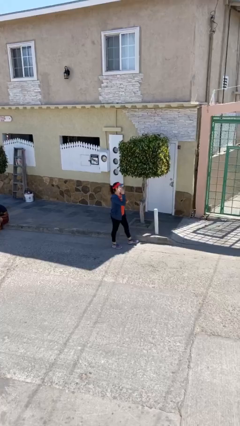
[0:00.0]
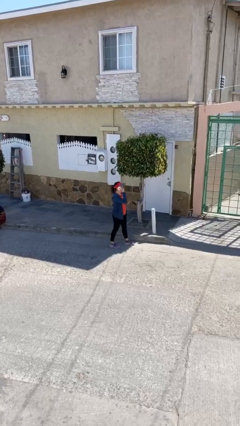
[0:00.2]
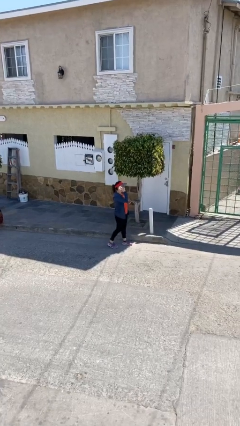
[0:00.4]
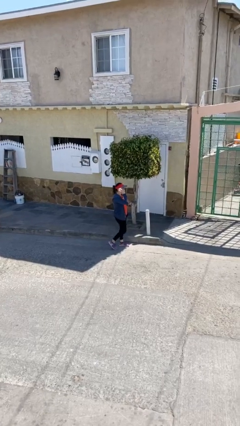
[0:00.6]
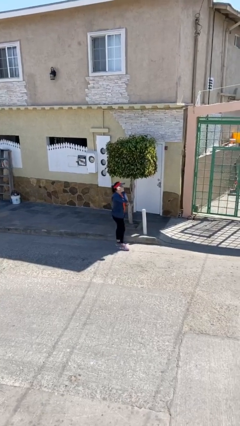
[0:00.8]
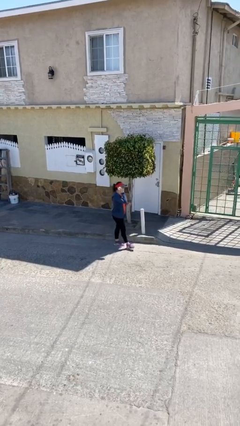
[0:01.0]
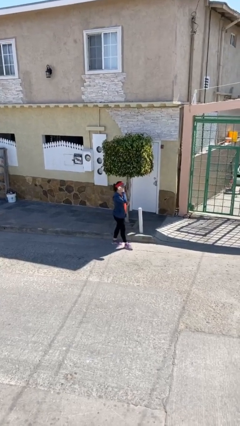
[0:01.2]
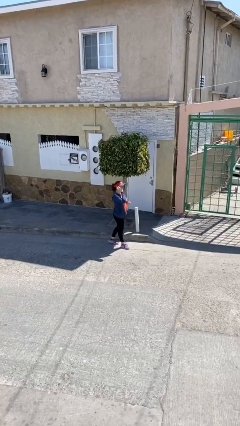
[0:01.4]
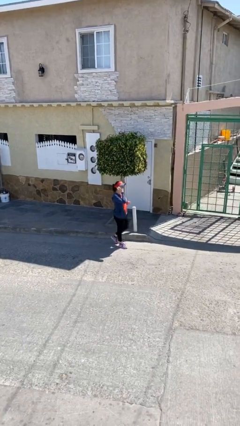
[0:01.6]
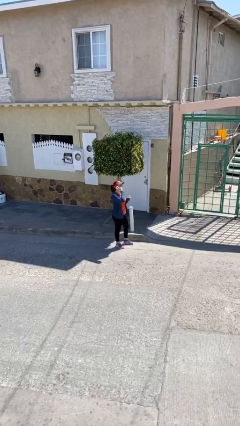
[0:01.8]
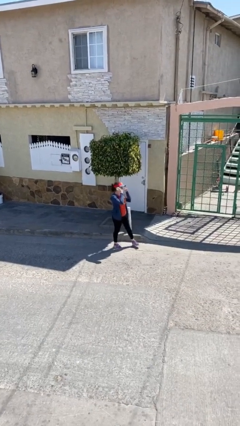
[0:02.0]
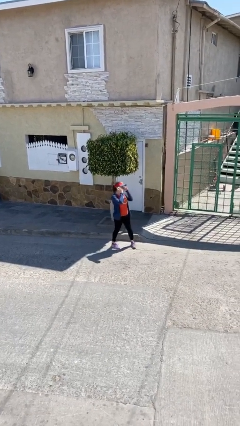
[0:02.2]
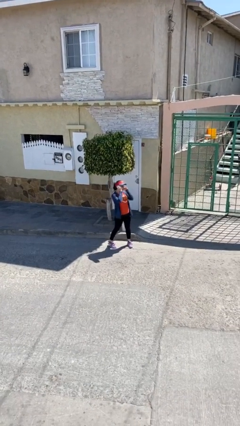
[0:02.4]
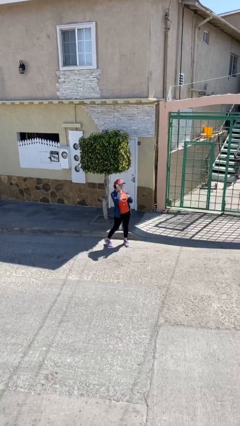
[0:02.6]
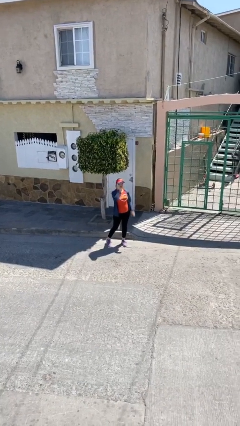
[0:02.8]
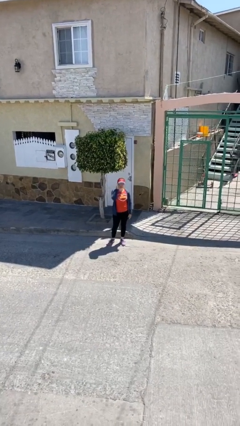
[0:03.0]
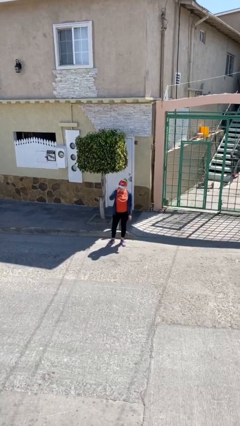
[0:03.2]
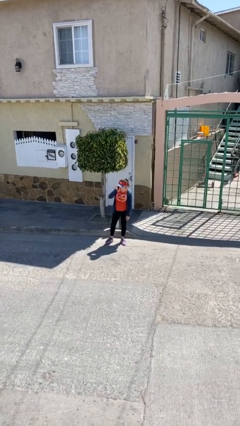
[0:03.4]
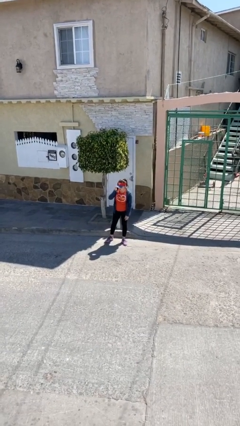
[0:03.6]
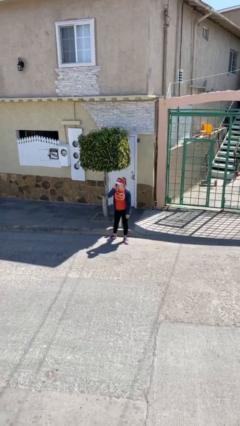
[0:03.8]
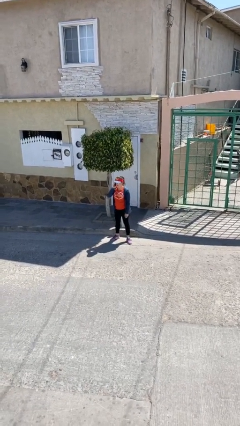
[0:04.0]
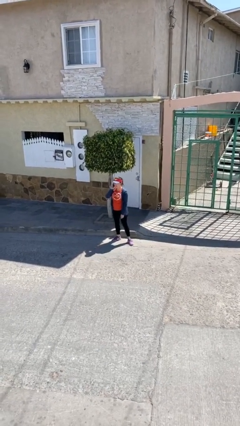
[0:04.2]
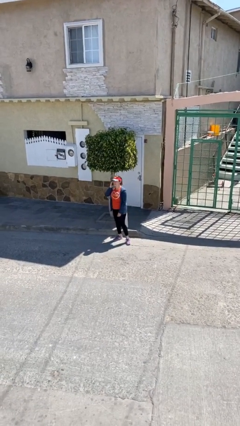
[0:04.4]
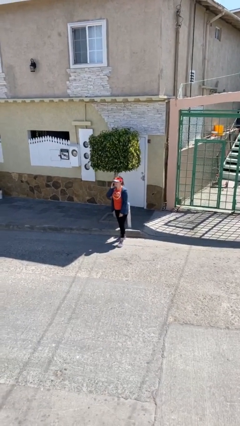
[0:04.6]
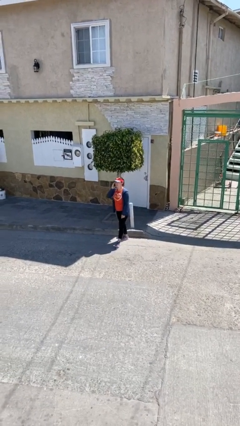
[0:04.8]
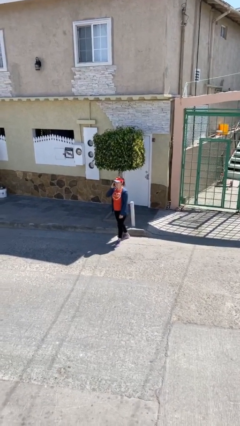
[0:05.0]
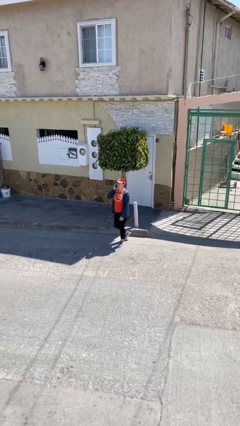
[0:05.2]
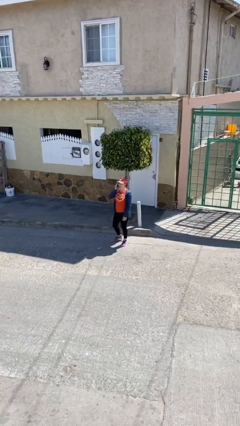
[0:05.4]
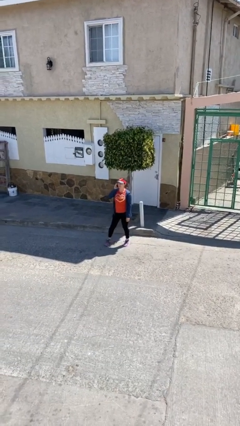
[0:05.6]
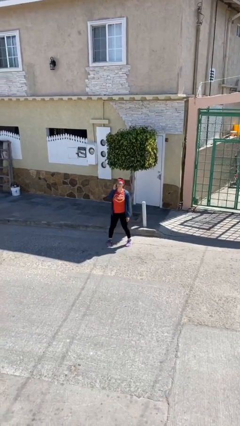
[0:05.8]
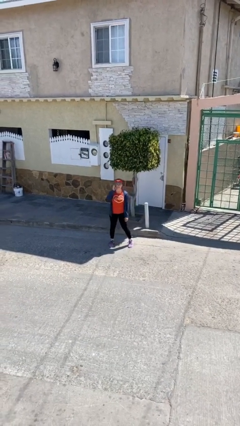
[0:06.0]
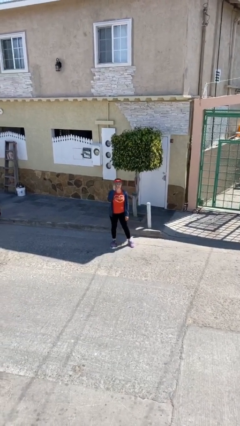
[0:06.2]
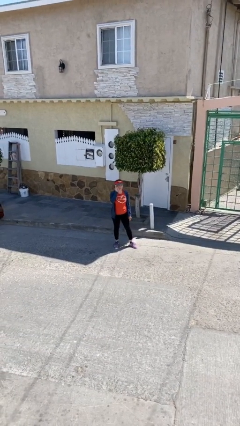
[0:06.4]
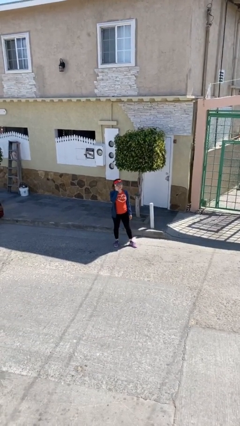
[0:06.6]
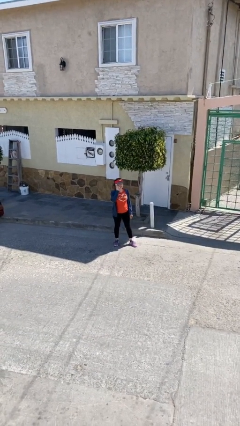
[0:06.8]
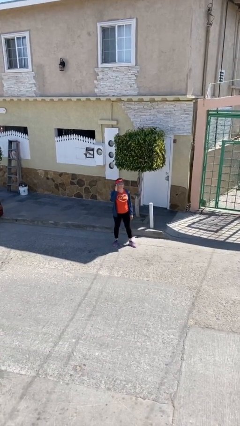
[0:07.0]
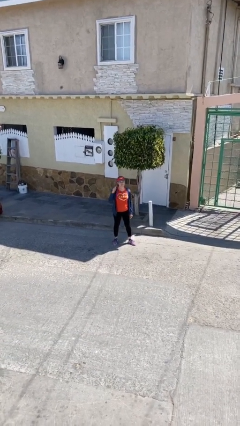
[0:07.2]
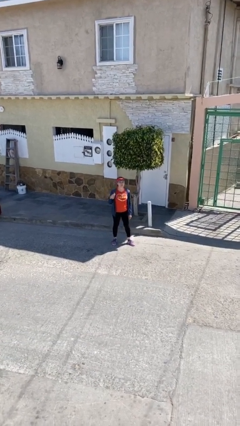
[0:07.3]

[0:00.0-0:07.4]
person talks on phone

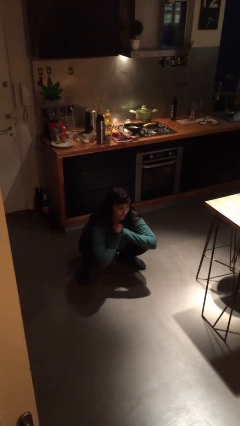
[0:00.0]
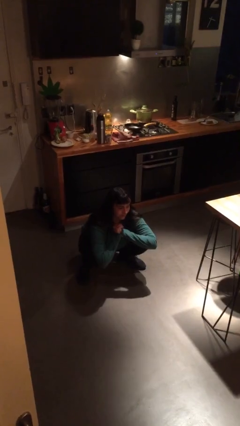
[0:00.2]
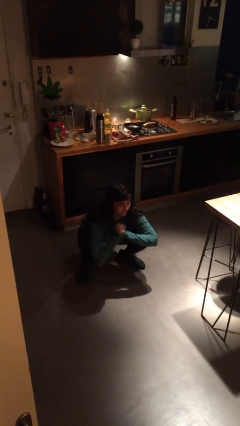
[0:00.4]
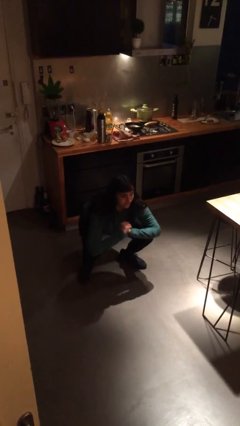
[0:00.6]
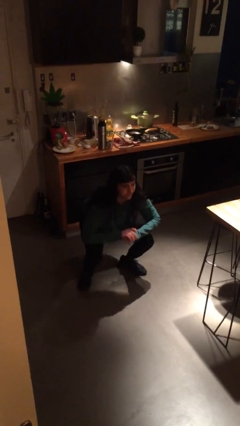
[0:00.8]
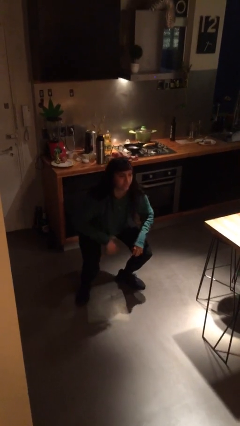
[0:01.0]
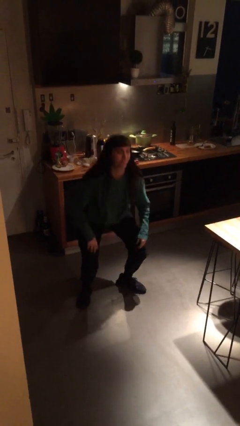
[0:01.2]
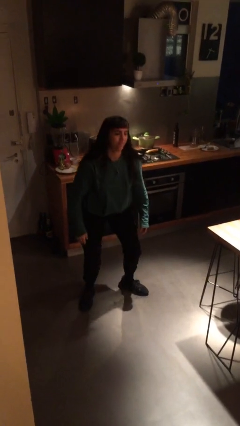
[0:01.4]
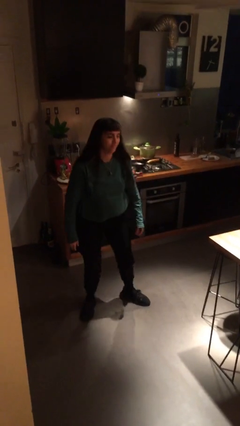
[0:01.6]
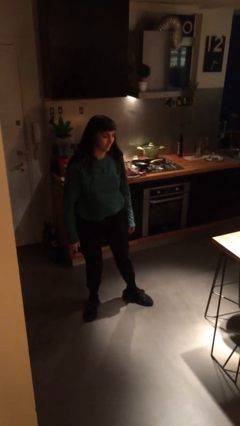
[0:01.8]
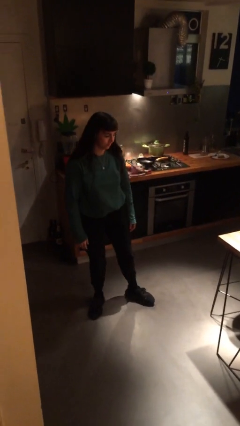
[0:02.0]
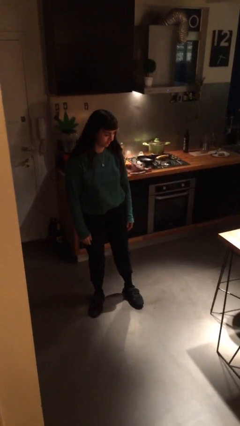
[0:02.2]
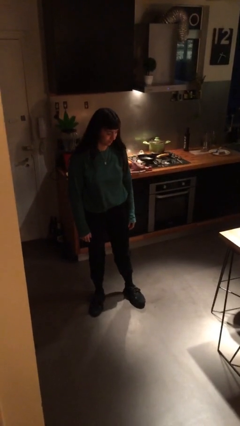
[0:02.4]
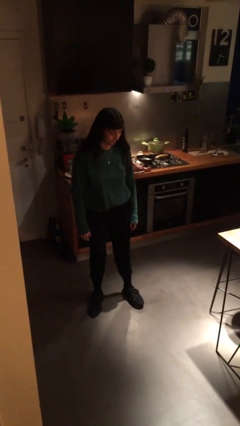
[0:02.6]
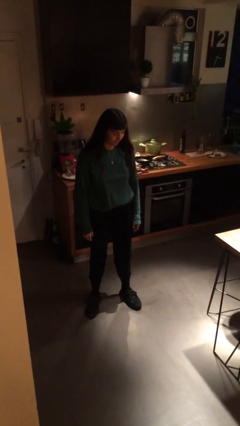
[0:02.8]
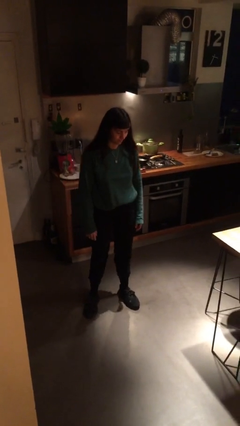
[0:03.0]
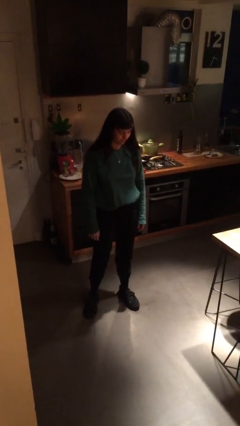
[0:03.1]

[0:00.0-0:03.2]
person stands up

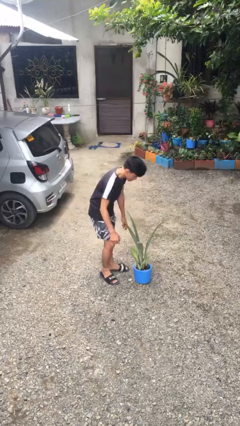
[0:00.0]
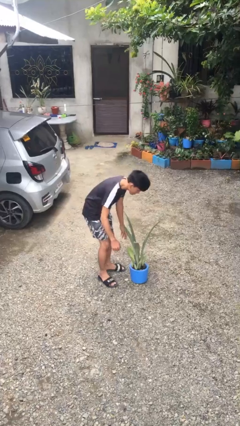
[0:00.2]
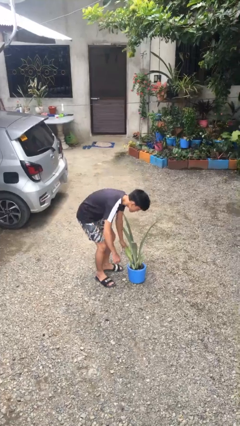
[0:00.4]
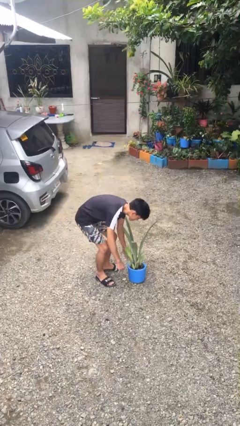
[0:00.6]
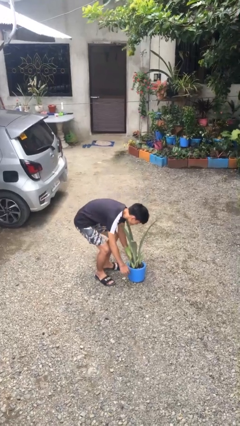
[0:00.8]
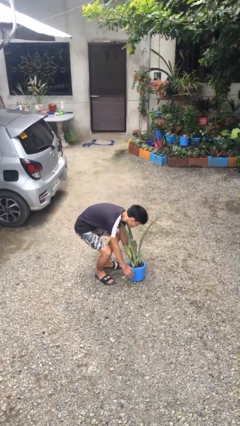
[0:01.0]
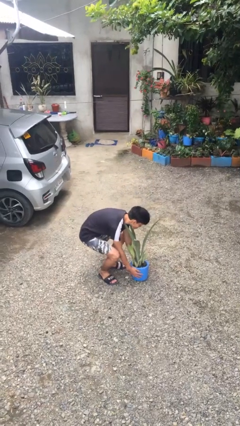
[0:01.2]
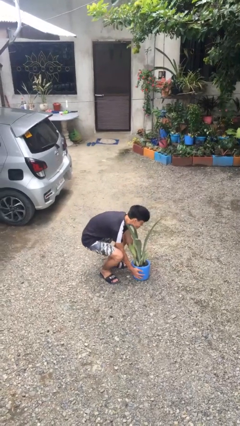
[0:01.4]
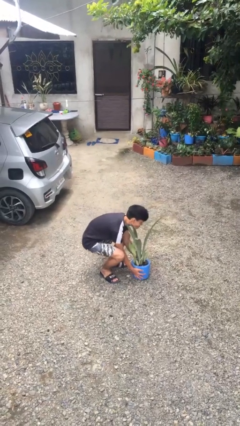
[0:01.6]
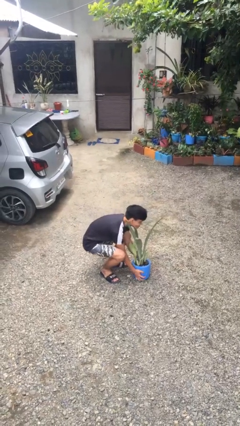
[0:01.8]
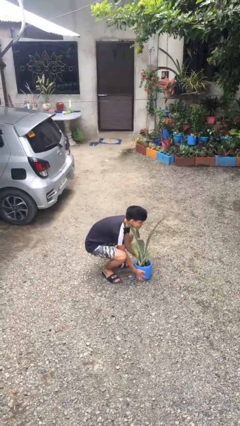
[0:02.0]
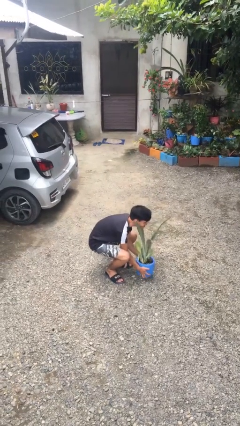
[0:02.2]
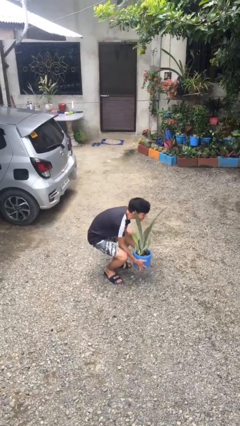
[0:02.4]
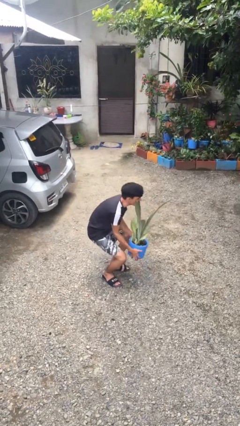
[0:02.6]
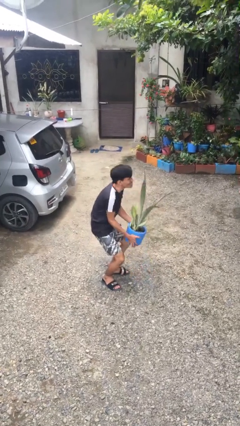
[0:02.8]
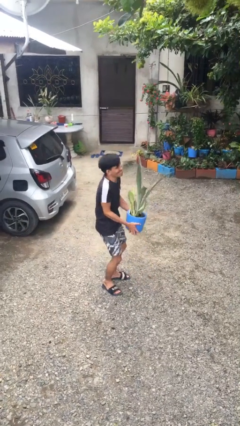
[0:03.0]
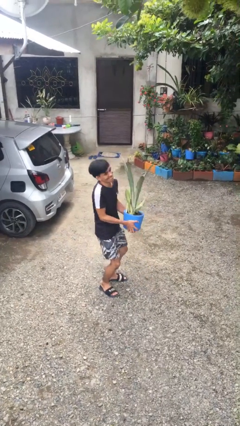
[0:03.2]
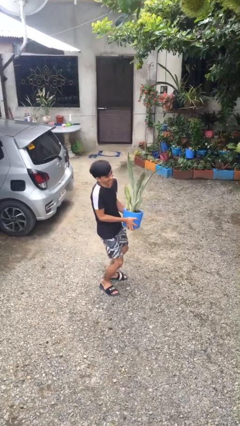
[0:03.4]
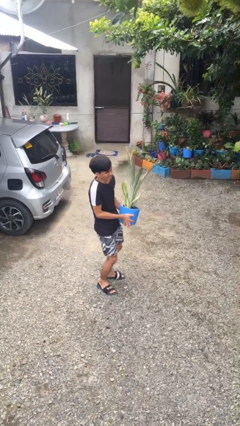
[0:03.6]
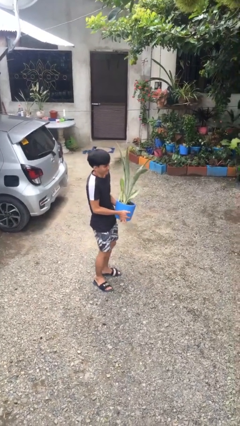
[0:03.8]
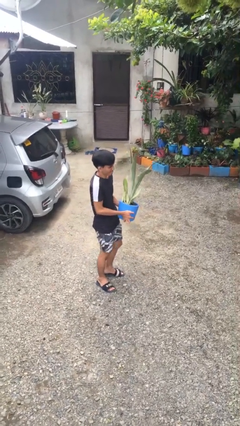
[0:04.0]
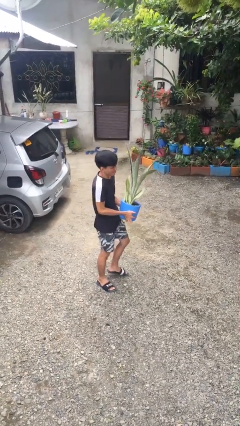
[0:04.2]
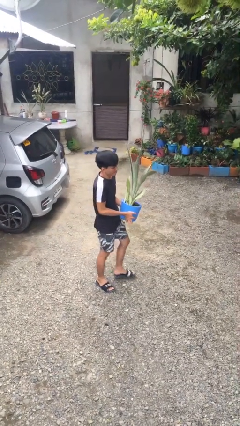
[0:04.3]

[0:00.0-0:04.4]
person picks up object from floor

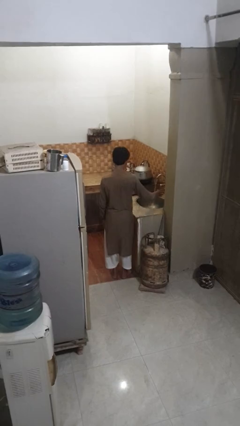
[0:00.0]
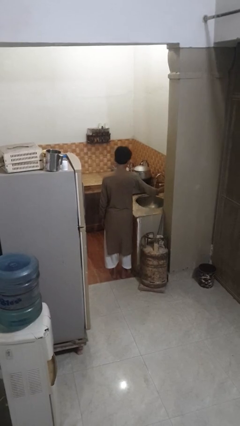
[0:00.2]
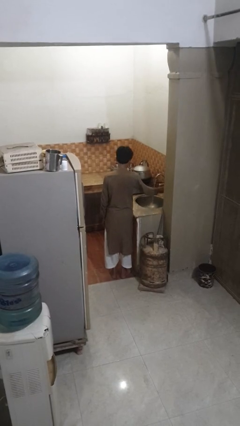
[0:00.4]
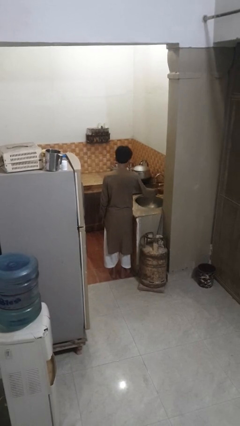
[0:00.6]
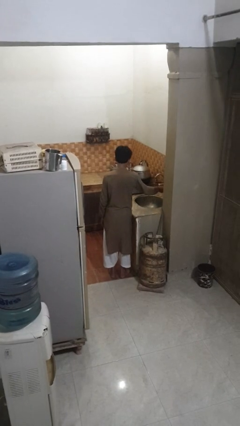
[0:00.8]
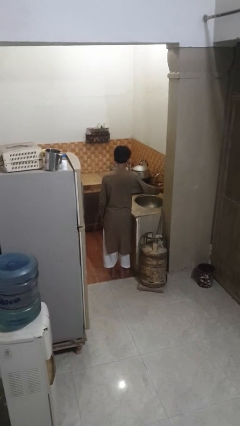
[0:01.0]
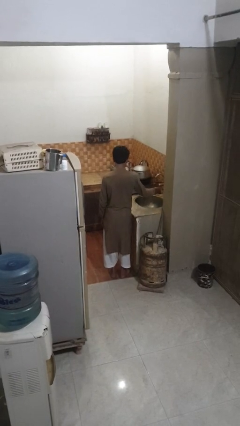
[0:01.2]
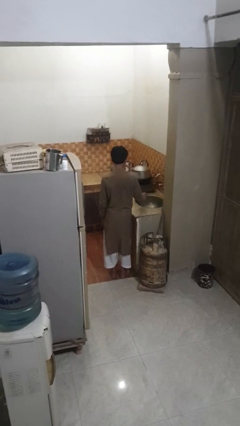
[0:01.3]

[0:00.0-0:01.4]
person turns off faucet

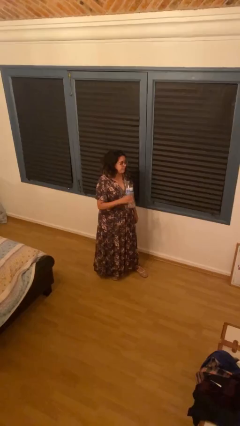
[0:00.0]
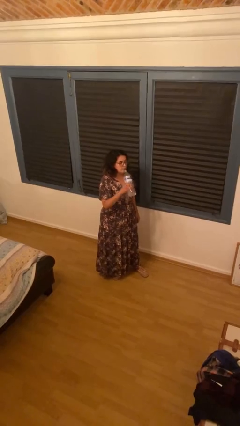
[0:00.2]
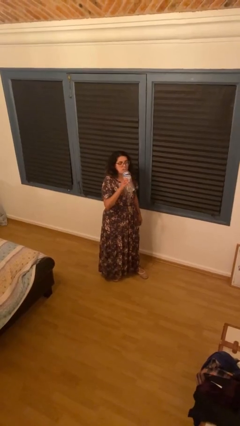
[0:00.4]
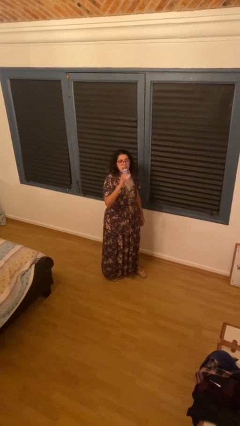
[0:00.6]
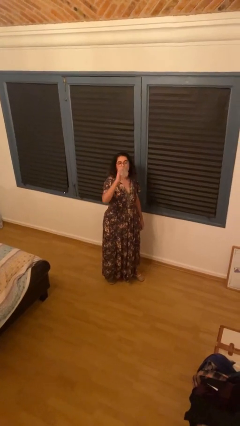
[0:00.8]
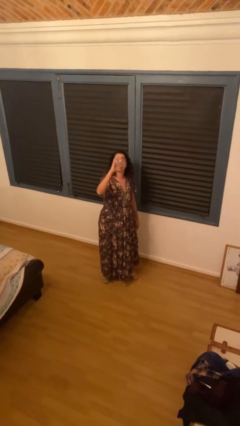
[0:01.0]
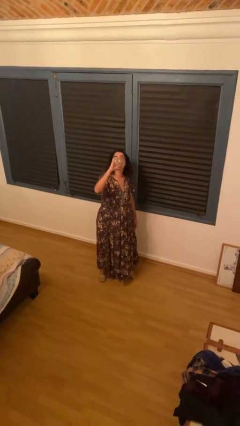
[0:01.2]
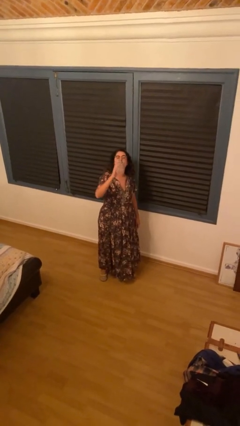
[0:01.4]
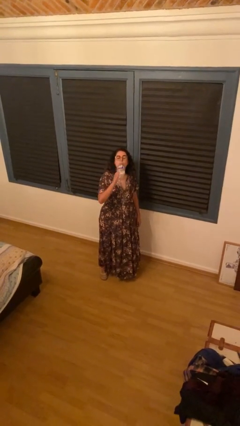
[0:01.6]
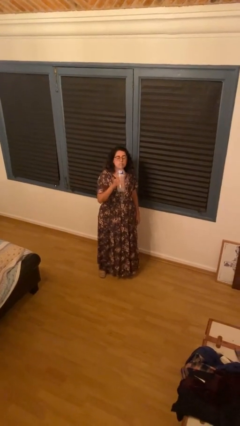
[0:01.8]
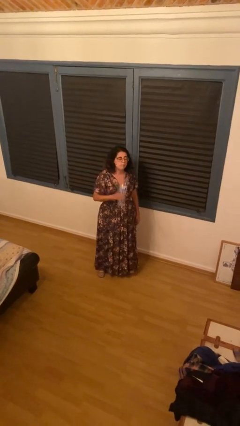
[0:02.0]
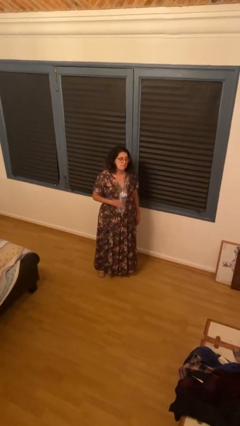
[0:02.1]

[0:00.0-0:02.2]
person drinks from bottle
